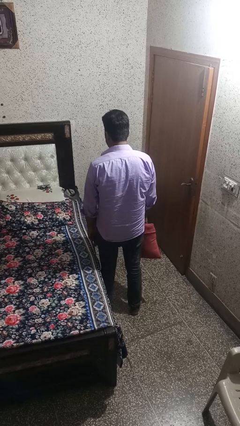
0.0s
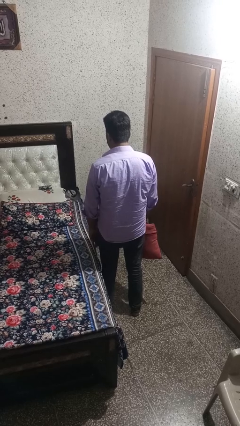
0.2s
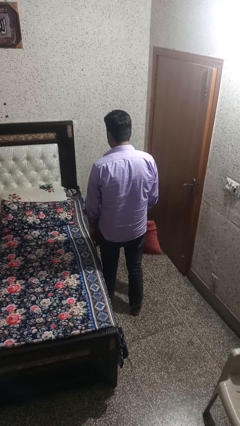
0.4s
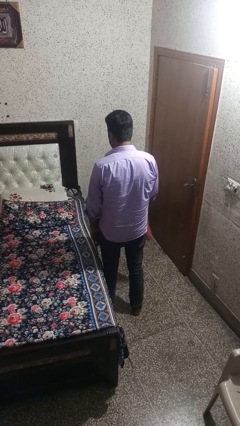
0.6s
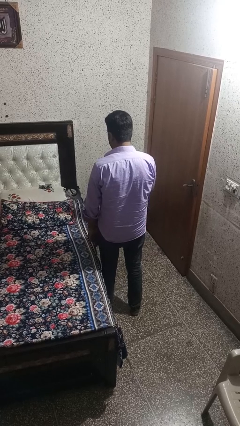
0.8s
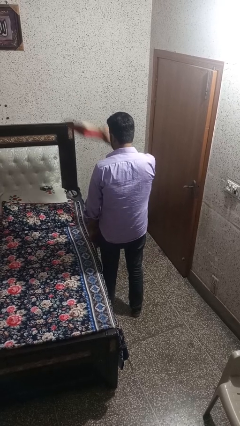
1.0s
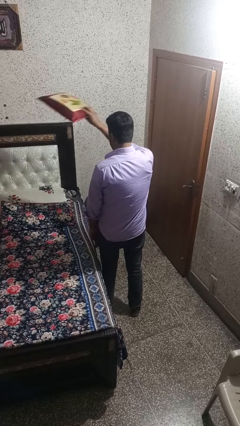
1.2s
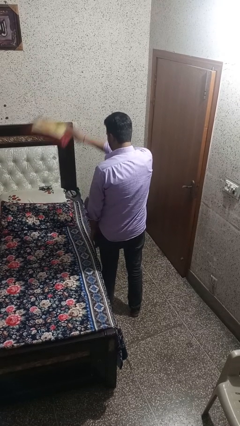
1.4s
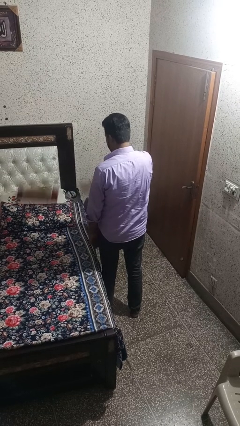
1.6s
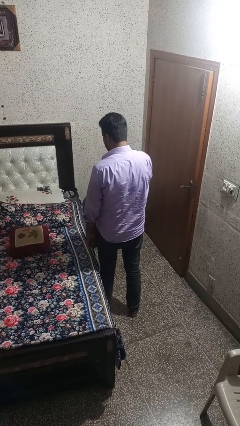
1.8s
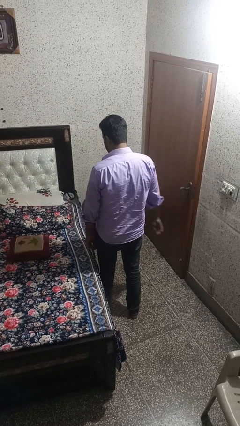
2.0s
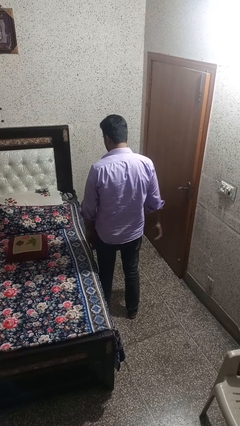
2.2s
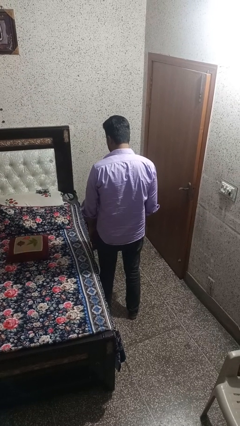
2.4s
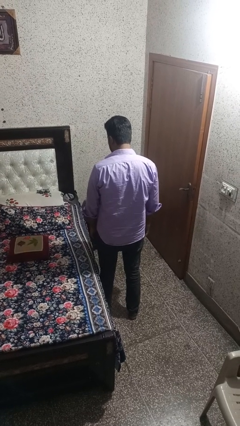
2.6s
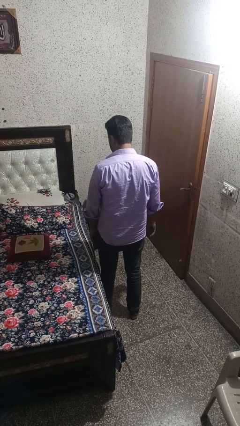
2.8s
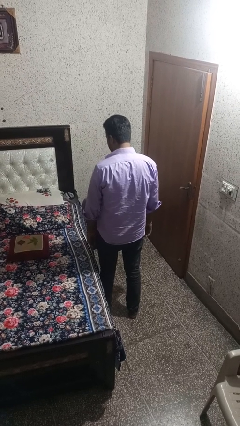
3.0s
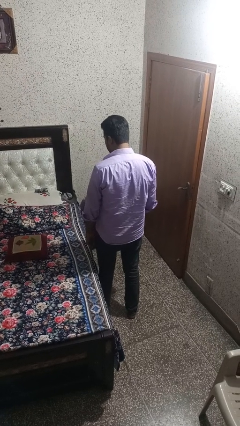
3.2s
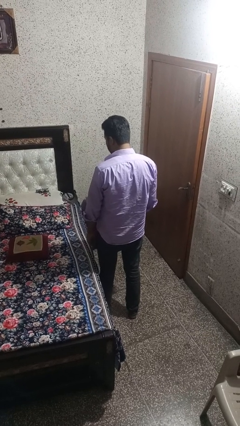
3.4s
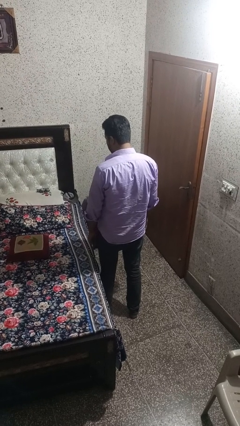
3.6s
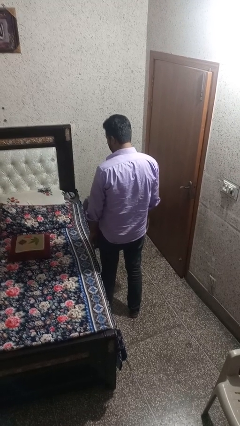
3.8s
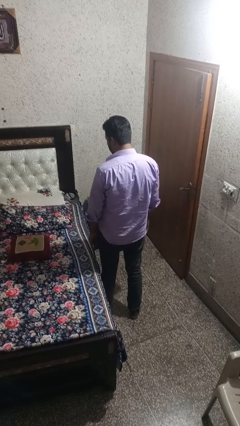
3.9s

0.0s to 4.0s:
person throws object on bed

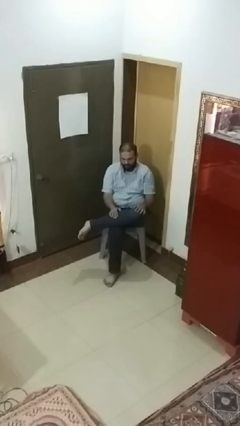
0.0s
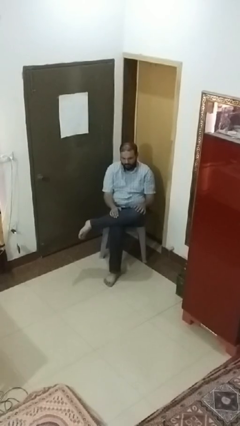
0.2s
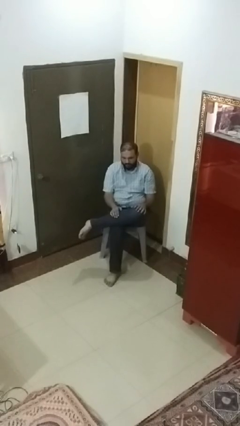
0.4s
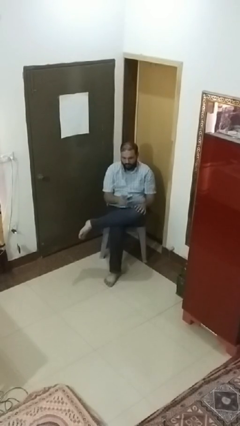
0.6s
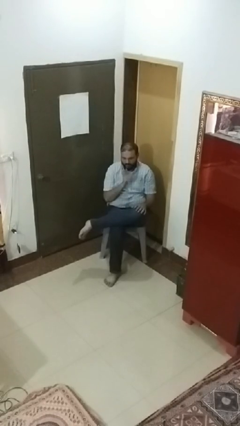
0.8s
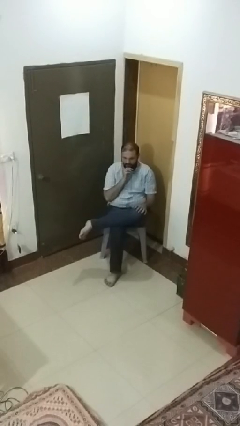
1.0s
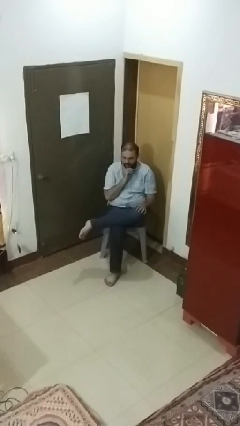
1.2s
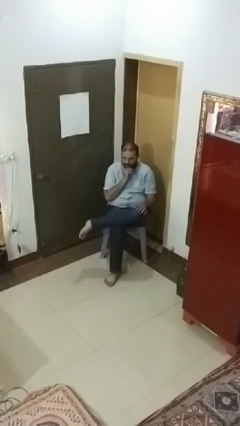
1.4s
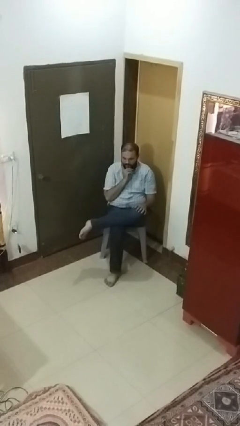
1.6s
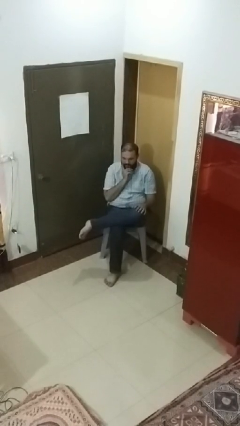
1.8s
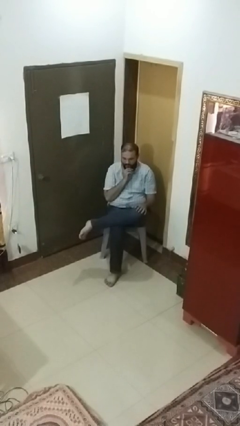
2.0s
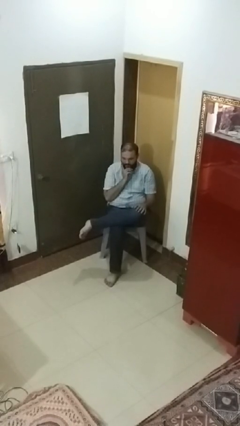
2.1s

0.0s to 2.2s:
person strokes chin

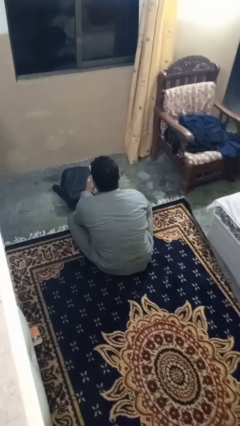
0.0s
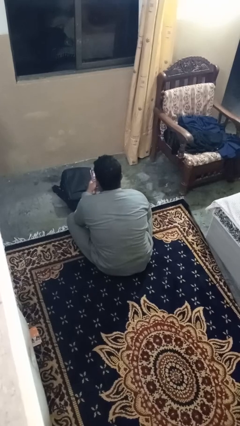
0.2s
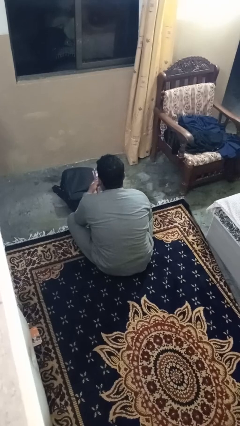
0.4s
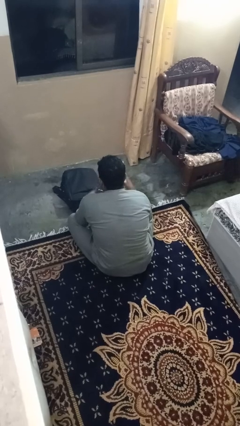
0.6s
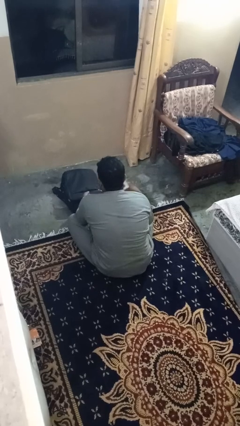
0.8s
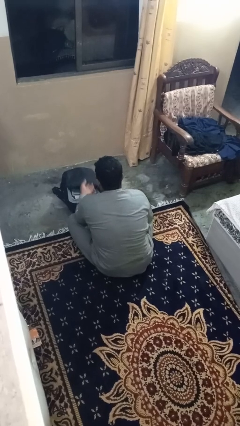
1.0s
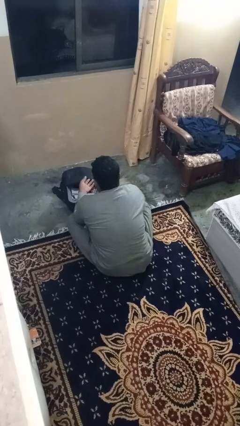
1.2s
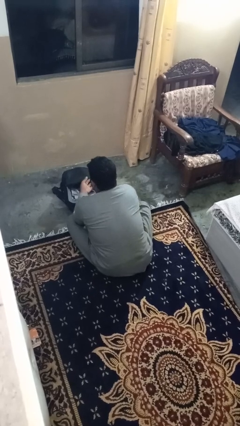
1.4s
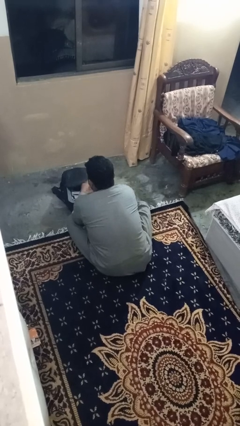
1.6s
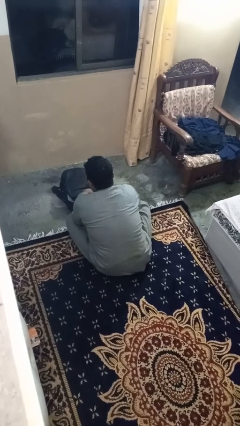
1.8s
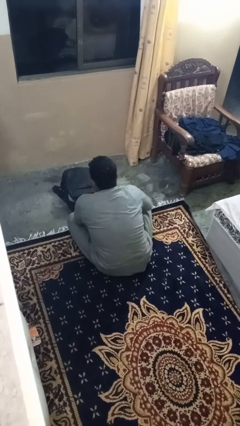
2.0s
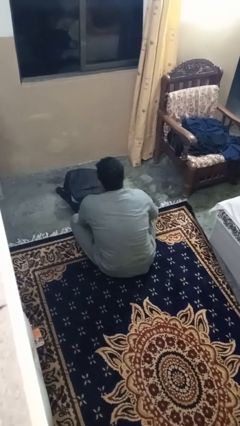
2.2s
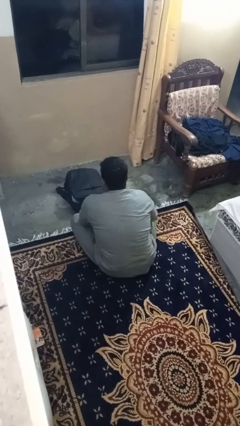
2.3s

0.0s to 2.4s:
person puts object into bag

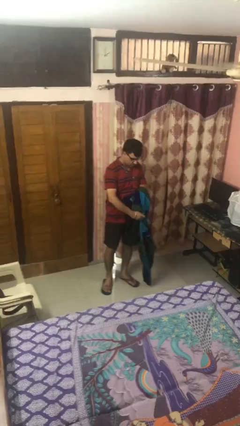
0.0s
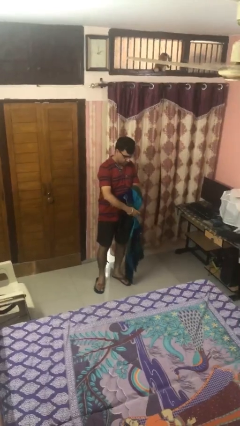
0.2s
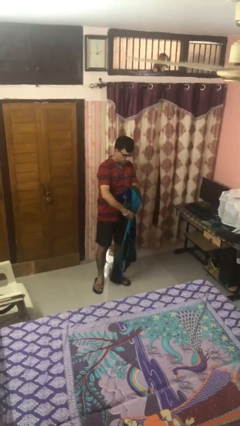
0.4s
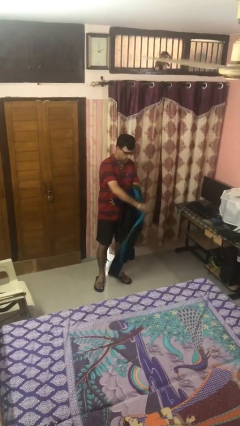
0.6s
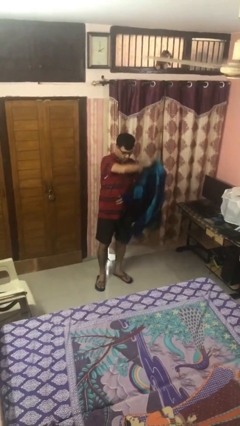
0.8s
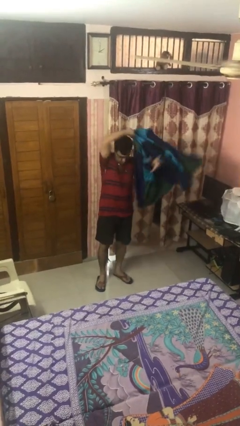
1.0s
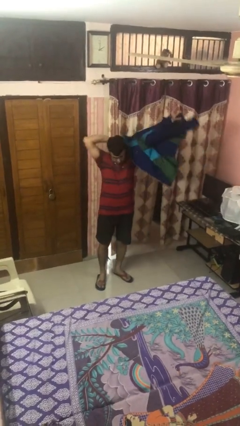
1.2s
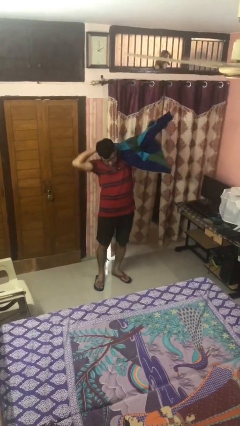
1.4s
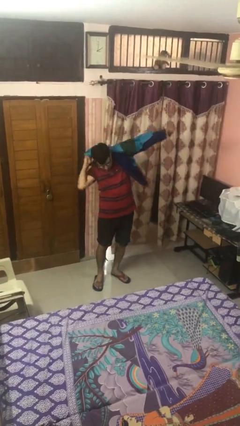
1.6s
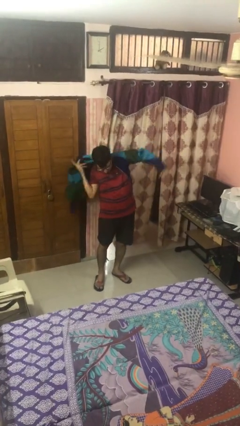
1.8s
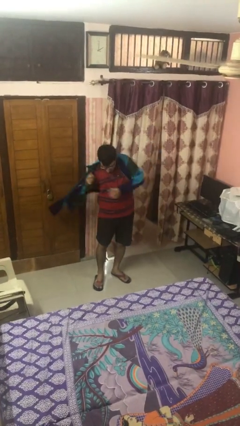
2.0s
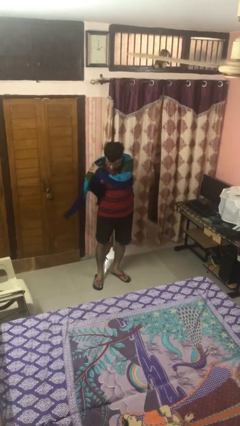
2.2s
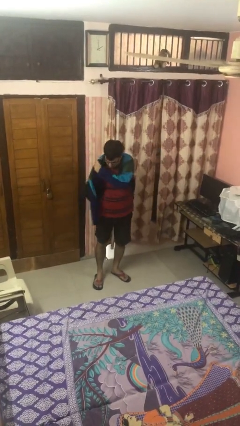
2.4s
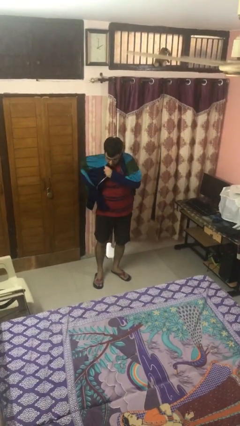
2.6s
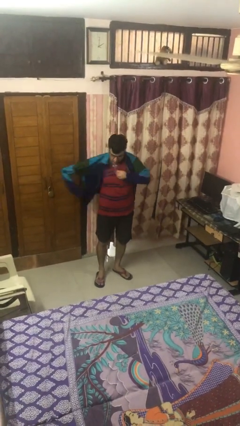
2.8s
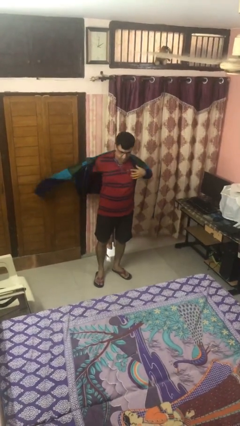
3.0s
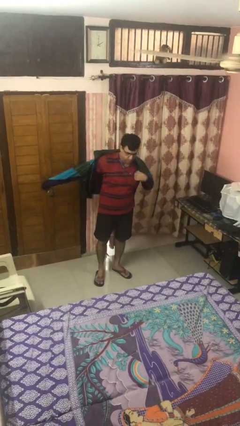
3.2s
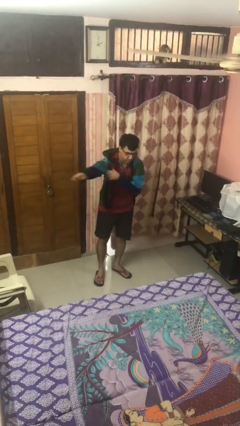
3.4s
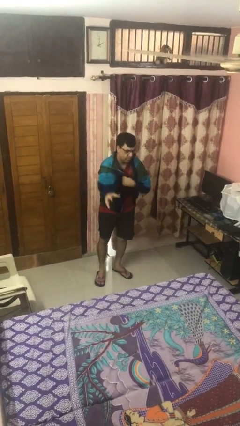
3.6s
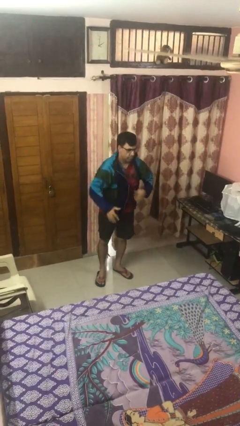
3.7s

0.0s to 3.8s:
person puts on jacket

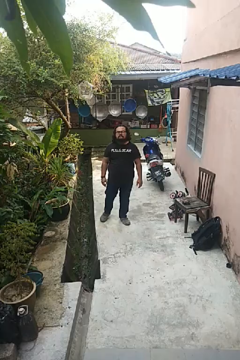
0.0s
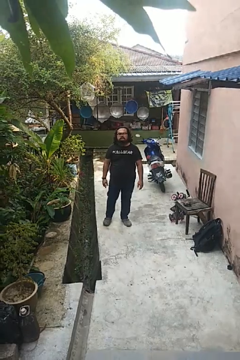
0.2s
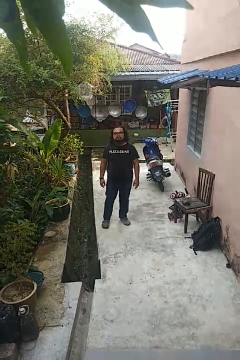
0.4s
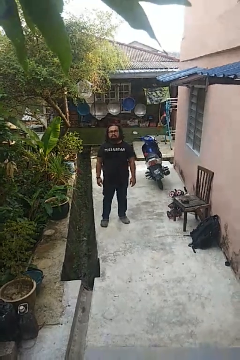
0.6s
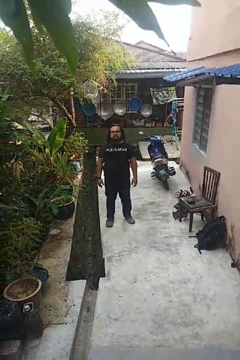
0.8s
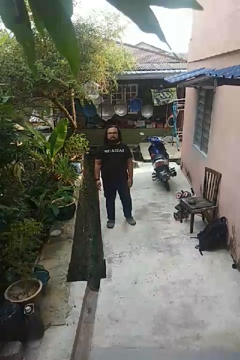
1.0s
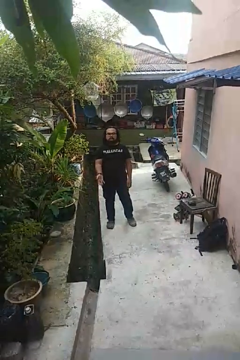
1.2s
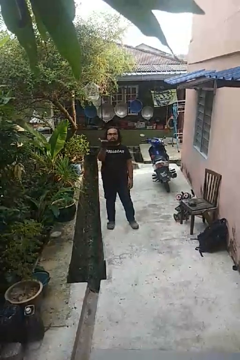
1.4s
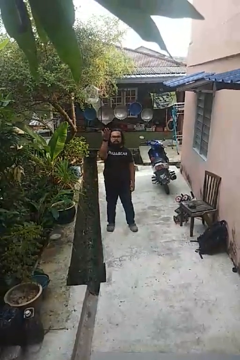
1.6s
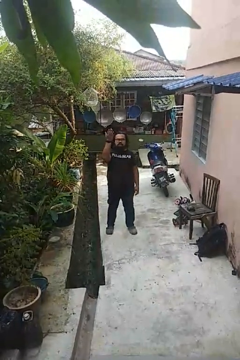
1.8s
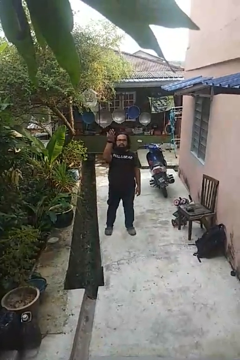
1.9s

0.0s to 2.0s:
person gestures swipe up

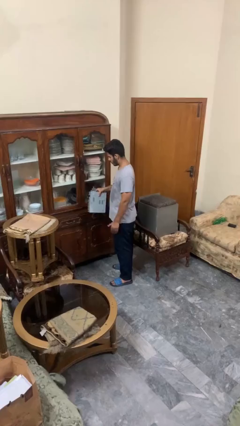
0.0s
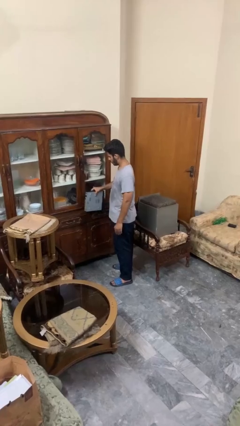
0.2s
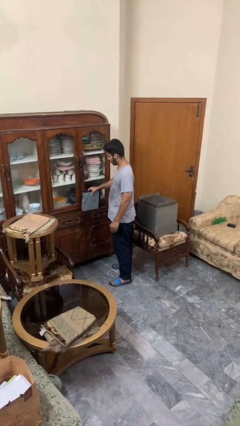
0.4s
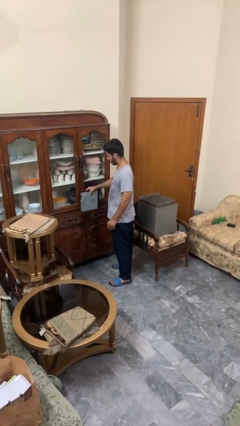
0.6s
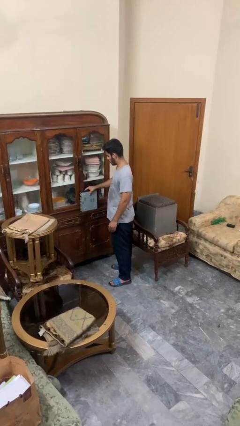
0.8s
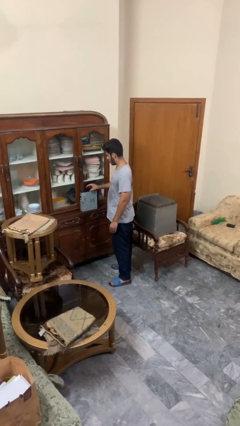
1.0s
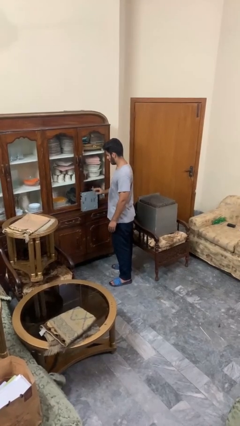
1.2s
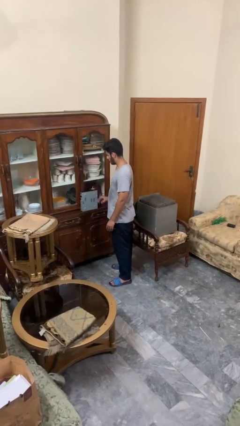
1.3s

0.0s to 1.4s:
person puts down object on countertop

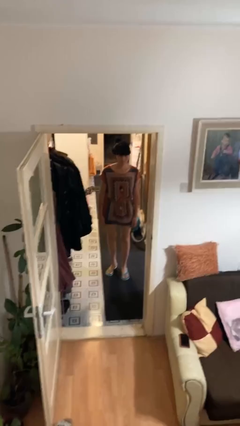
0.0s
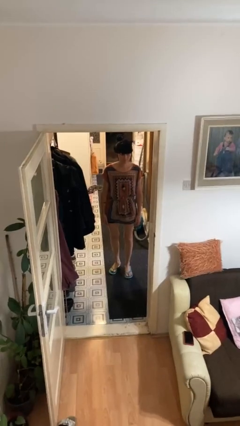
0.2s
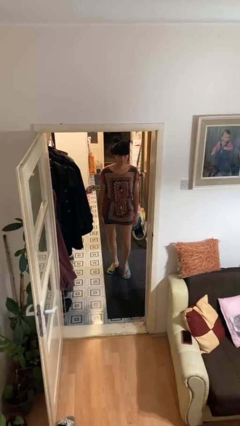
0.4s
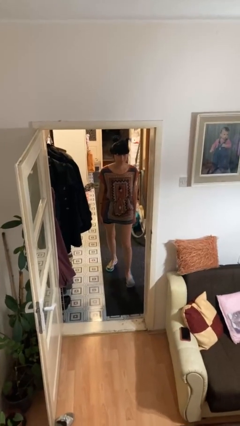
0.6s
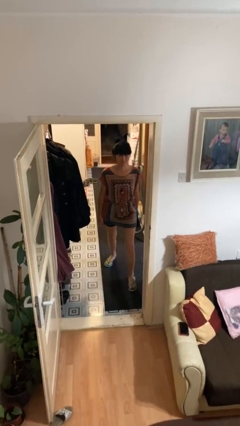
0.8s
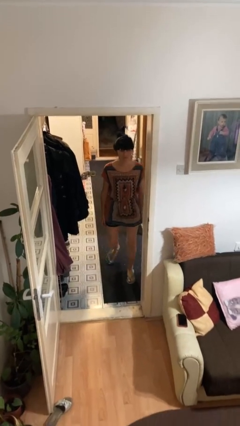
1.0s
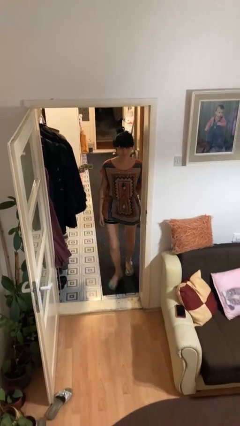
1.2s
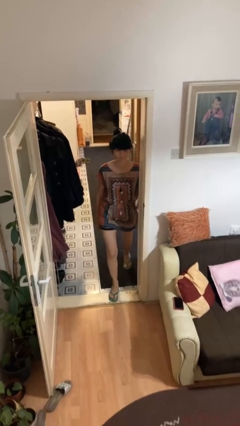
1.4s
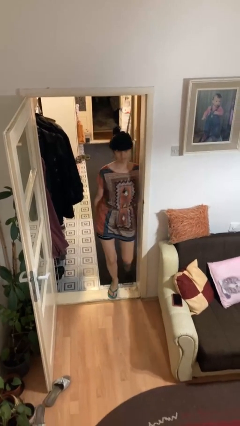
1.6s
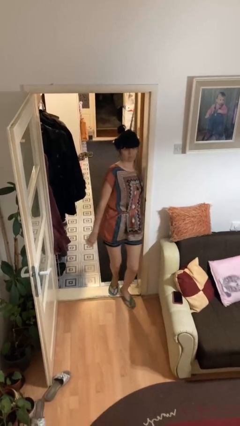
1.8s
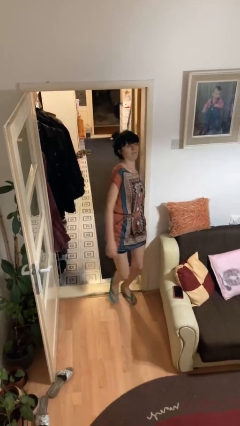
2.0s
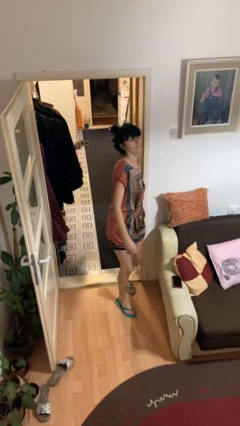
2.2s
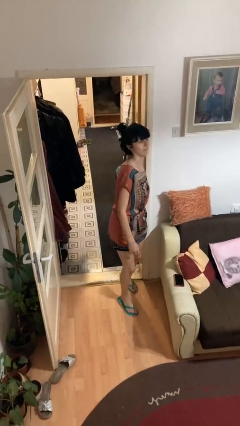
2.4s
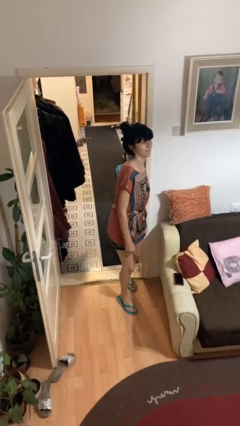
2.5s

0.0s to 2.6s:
person bumps into wall
